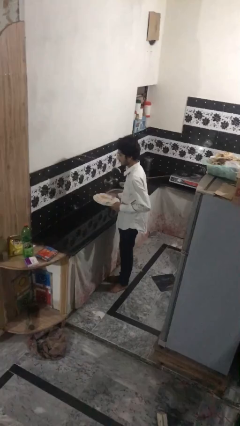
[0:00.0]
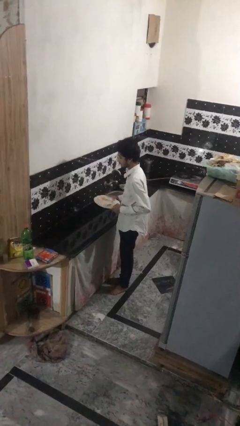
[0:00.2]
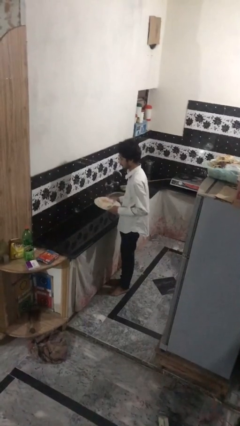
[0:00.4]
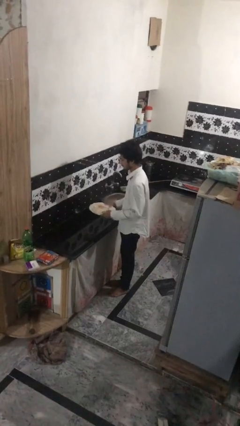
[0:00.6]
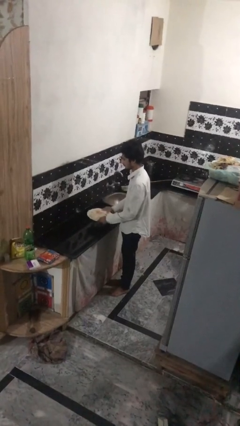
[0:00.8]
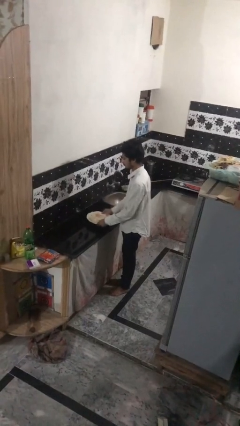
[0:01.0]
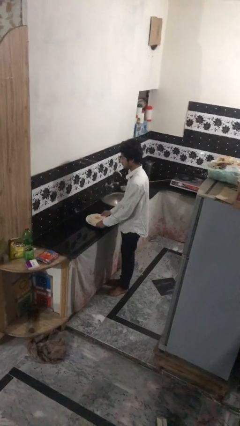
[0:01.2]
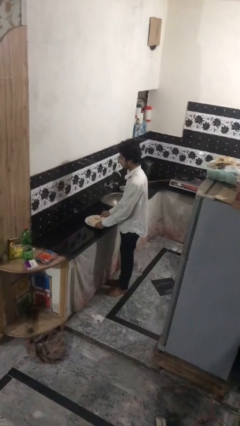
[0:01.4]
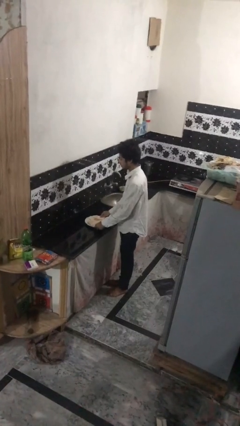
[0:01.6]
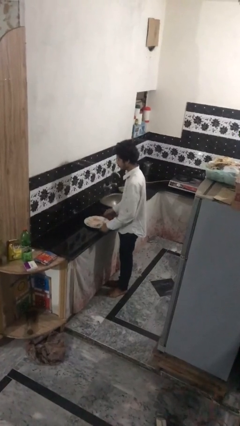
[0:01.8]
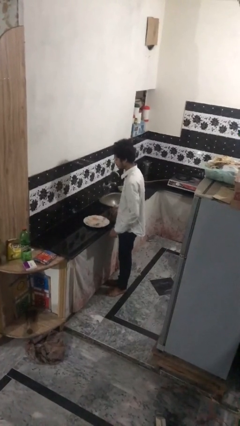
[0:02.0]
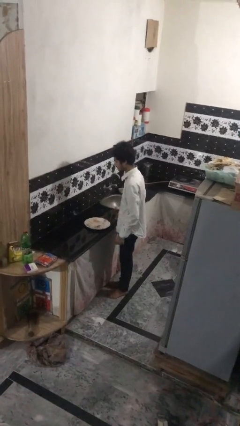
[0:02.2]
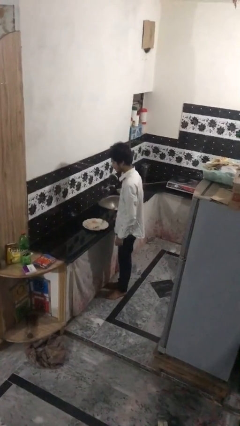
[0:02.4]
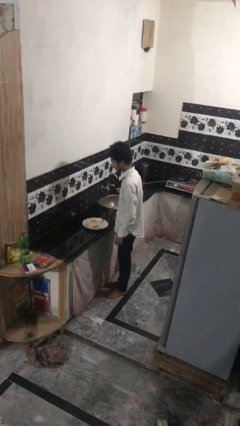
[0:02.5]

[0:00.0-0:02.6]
person puts down object on countertop

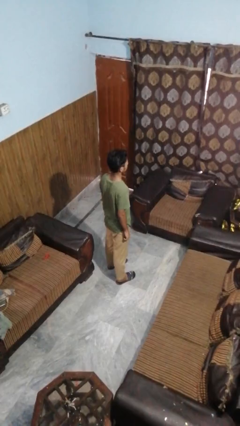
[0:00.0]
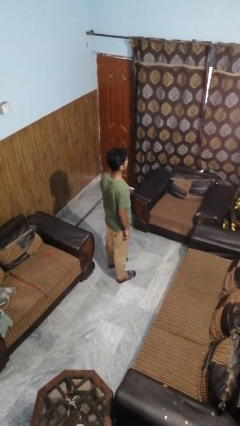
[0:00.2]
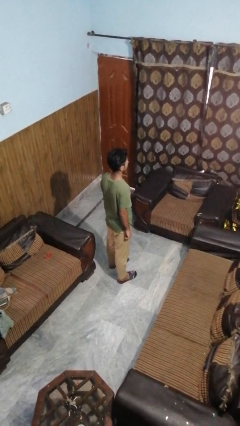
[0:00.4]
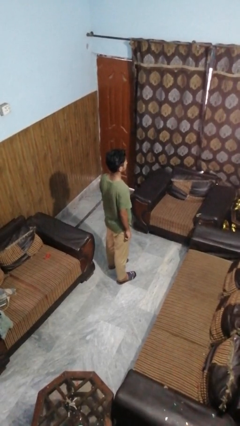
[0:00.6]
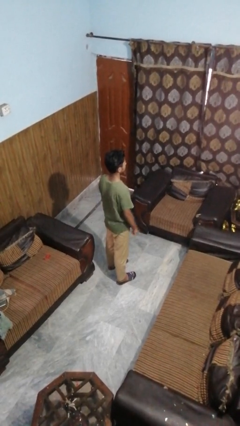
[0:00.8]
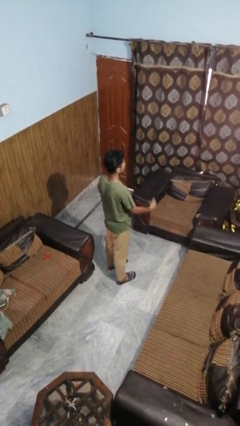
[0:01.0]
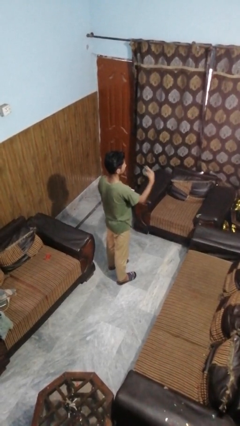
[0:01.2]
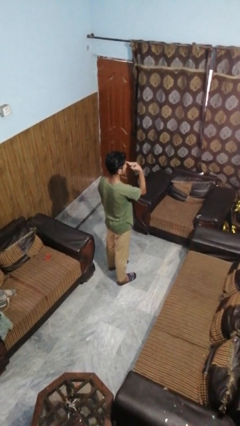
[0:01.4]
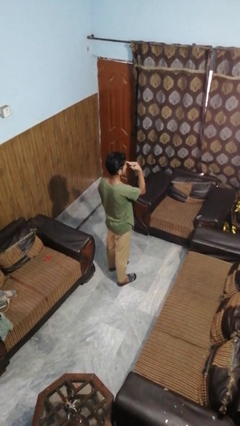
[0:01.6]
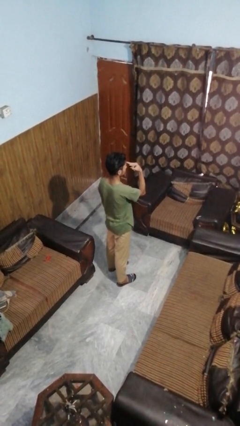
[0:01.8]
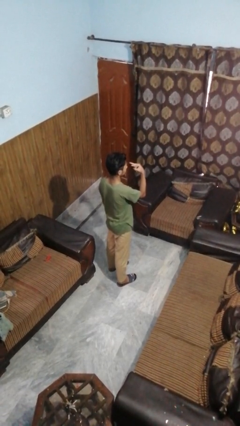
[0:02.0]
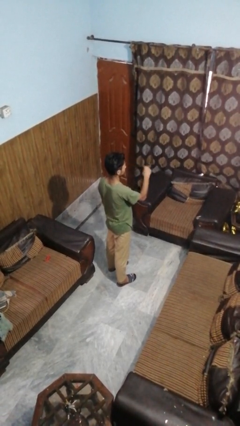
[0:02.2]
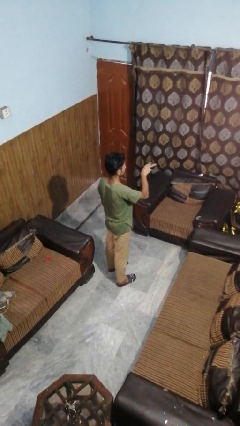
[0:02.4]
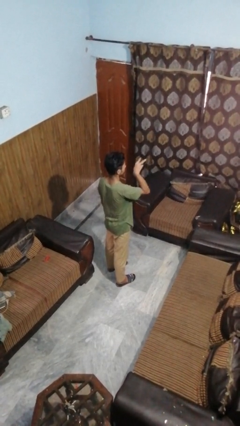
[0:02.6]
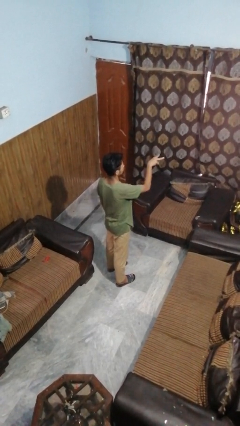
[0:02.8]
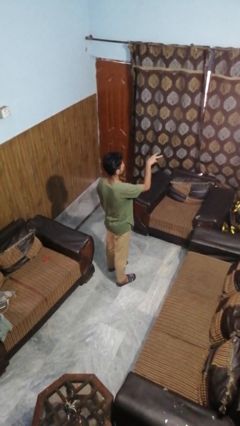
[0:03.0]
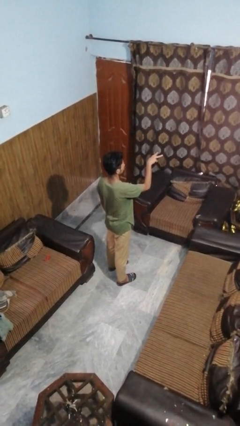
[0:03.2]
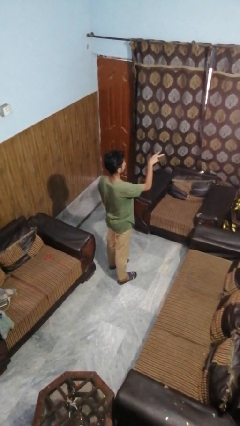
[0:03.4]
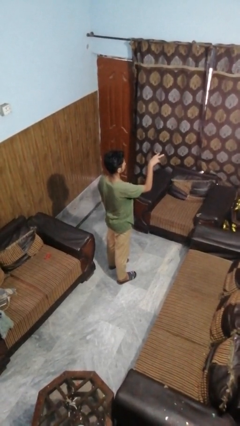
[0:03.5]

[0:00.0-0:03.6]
person gestures watch closely

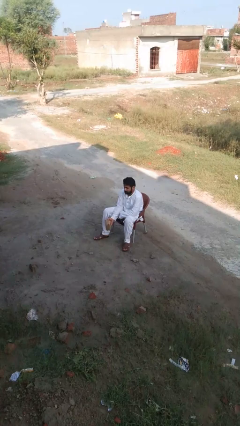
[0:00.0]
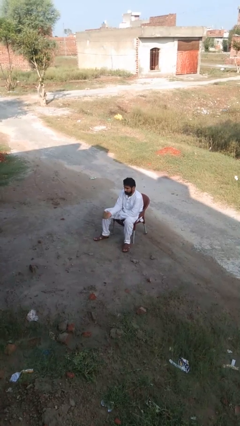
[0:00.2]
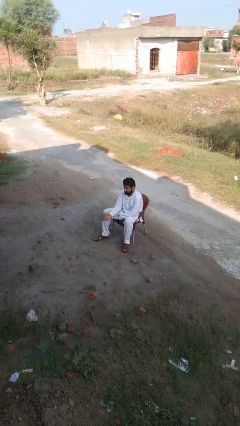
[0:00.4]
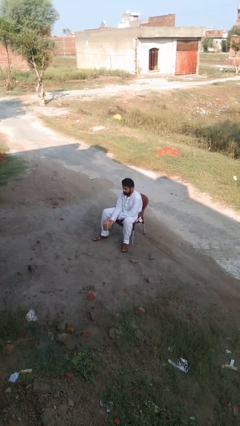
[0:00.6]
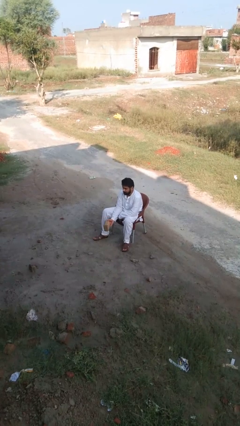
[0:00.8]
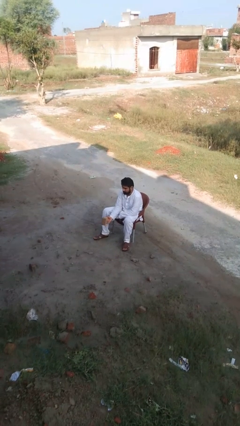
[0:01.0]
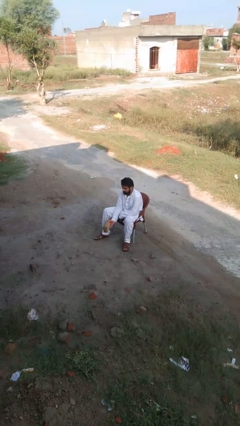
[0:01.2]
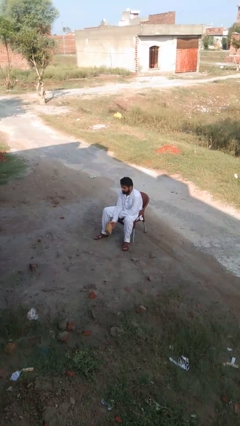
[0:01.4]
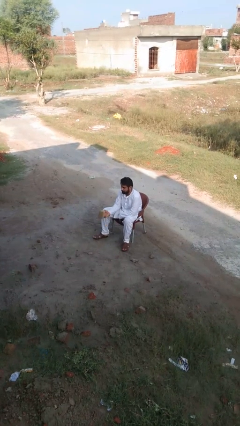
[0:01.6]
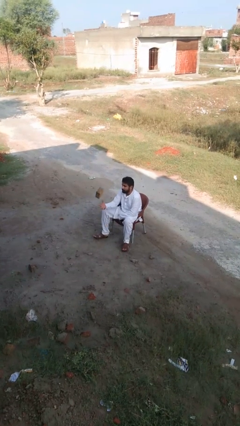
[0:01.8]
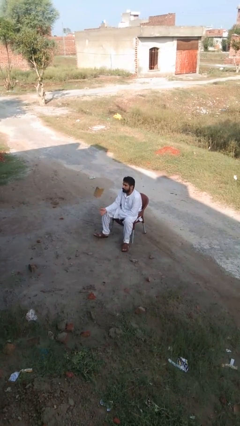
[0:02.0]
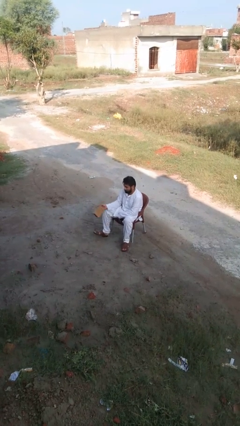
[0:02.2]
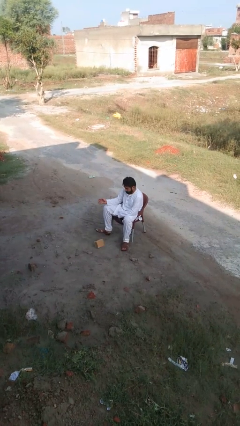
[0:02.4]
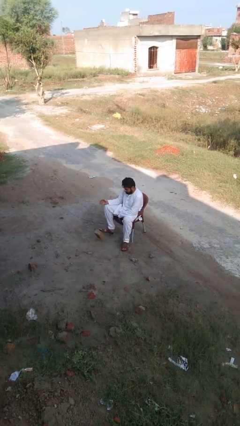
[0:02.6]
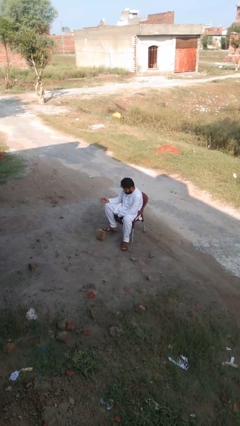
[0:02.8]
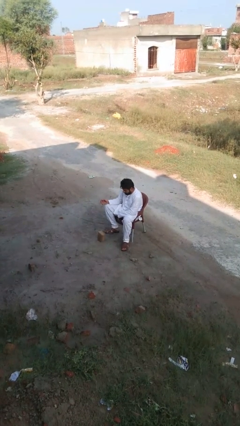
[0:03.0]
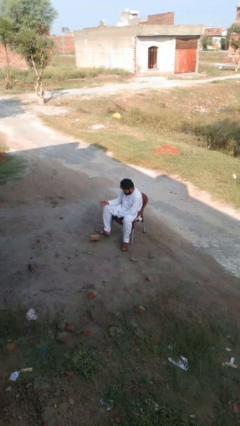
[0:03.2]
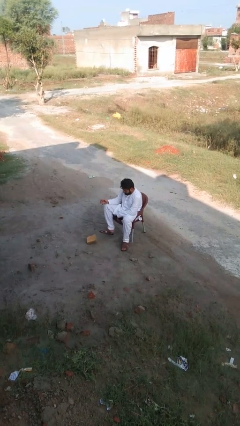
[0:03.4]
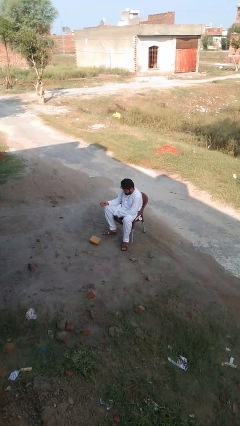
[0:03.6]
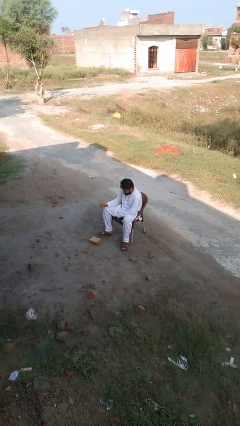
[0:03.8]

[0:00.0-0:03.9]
person throws object into air

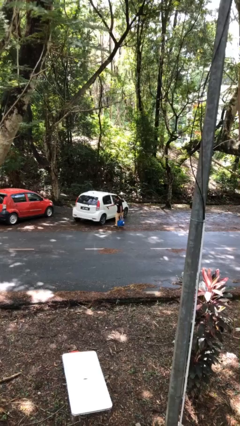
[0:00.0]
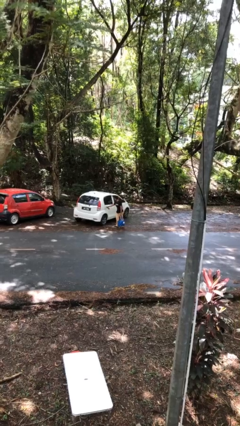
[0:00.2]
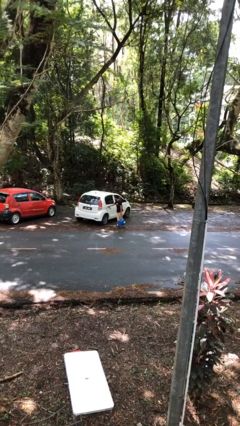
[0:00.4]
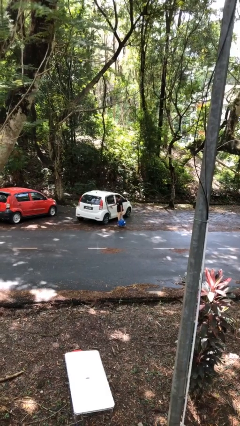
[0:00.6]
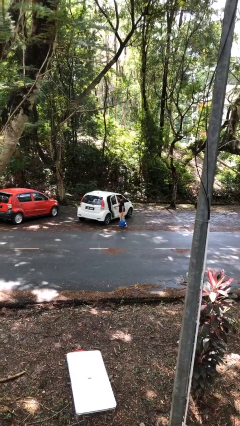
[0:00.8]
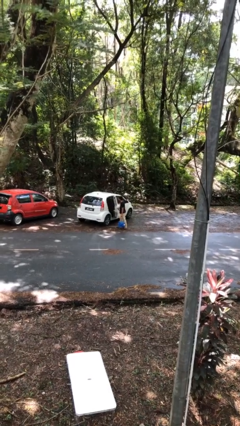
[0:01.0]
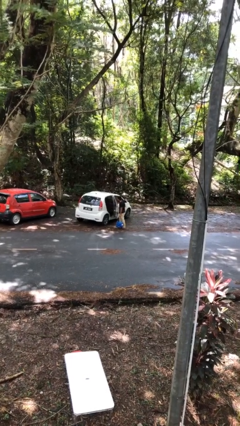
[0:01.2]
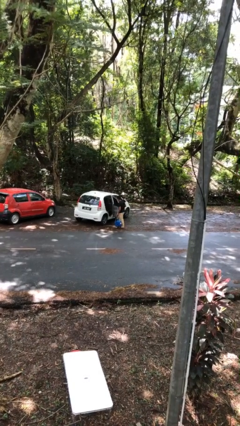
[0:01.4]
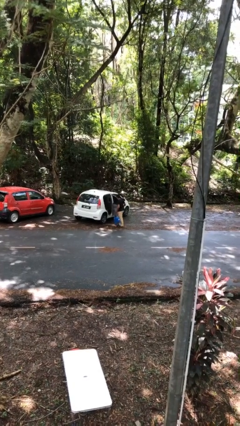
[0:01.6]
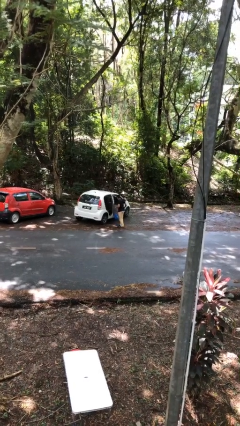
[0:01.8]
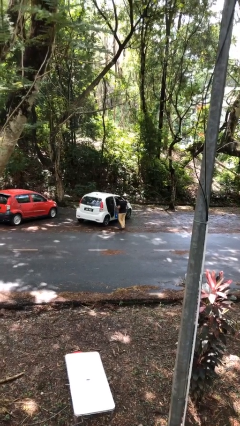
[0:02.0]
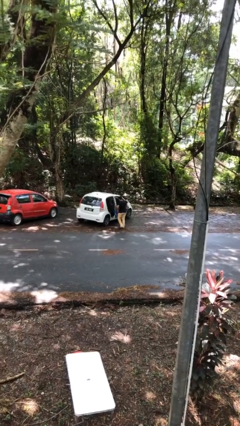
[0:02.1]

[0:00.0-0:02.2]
person opens car door

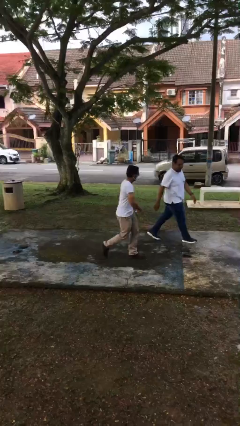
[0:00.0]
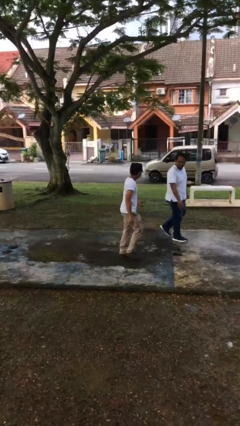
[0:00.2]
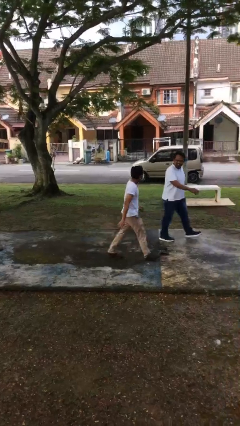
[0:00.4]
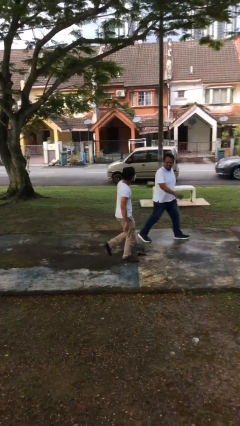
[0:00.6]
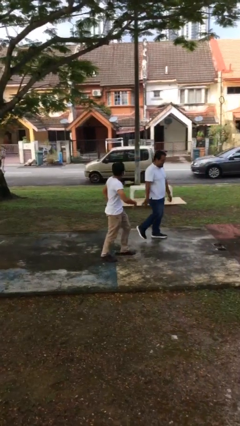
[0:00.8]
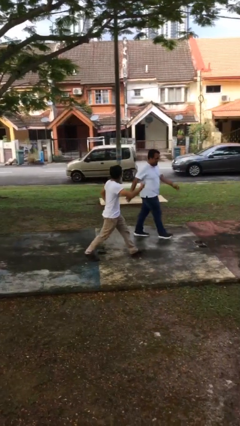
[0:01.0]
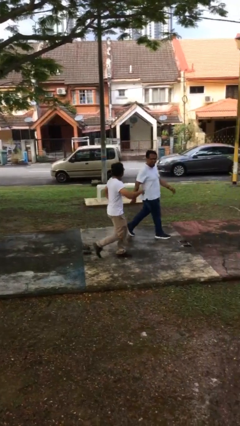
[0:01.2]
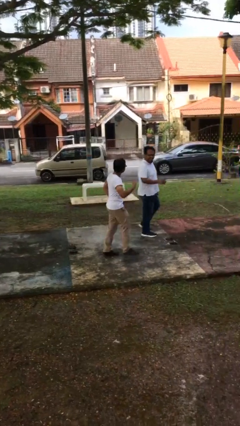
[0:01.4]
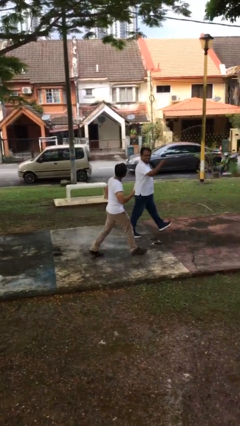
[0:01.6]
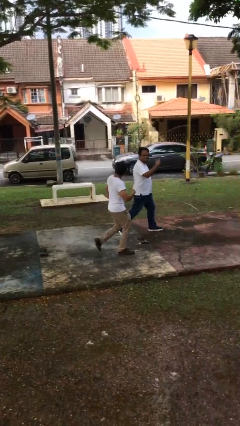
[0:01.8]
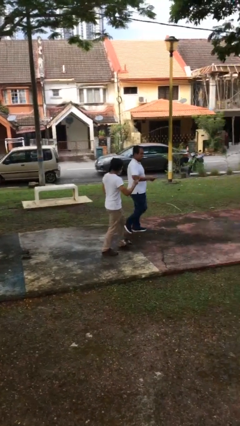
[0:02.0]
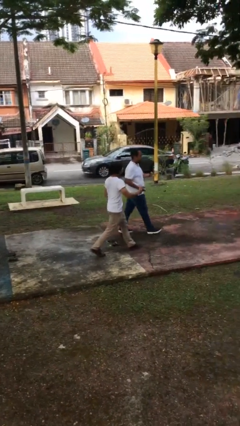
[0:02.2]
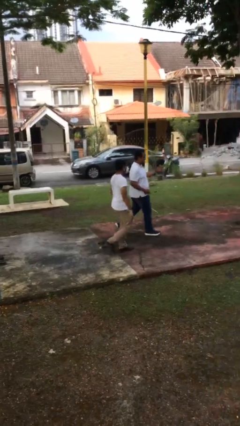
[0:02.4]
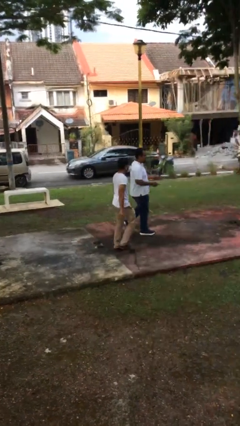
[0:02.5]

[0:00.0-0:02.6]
person talks to person

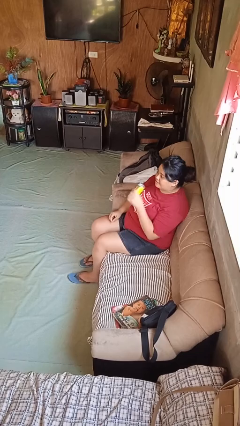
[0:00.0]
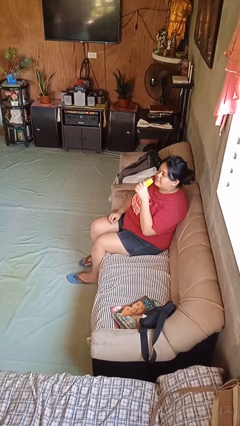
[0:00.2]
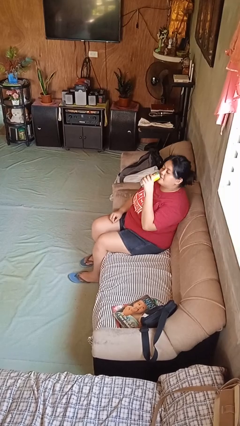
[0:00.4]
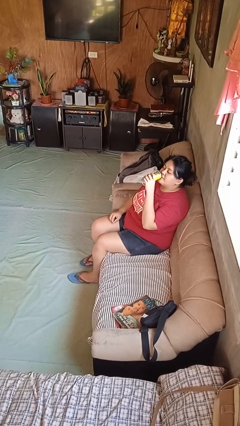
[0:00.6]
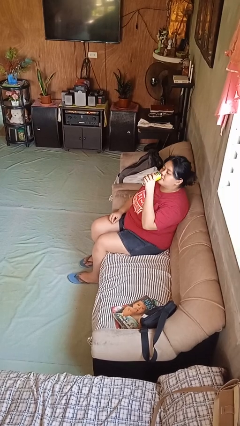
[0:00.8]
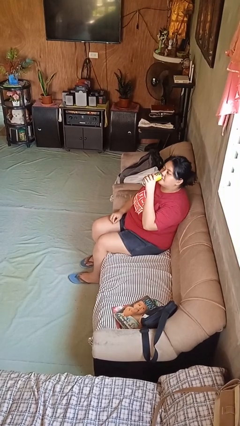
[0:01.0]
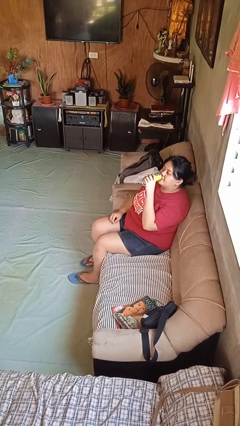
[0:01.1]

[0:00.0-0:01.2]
person drinks from beverage can

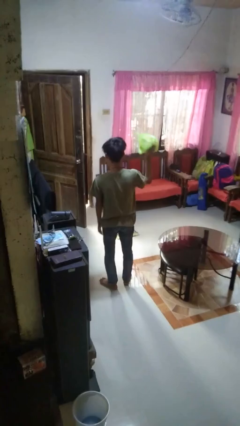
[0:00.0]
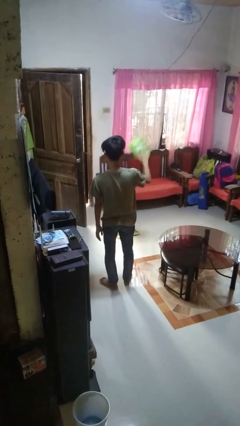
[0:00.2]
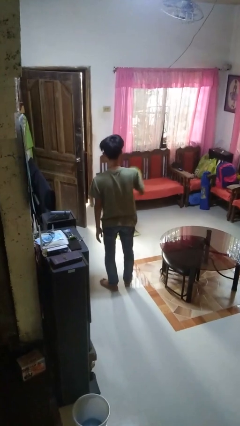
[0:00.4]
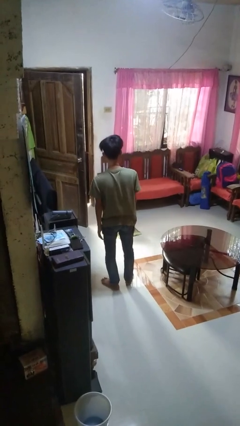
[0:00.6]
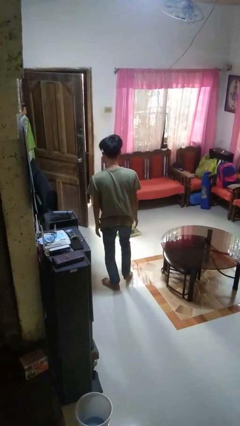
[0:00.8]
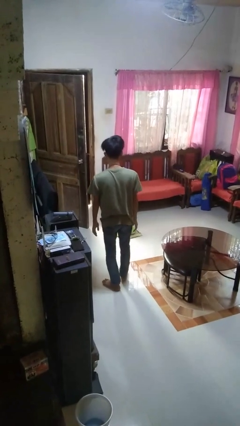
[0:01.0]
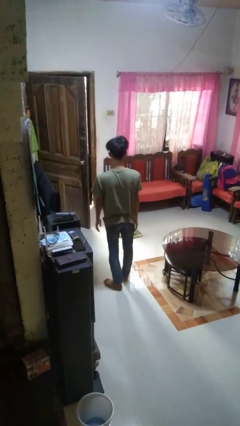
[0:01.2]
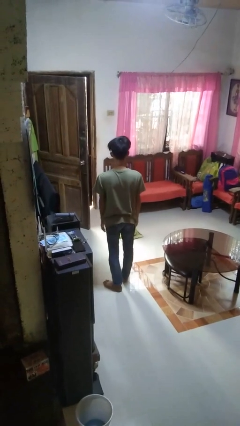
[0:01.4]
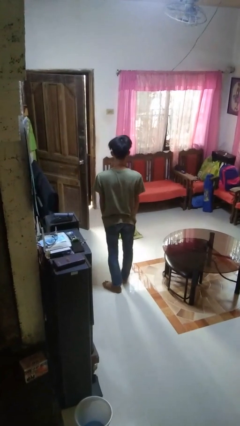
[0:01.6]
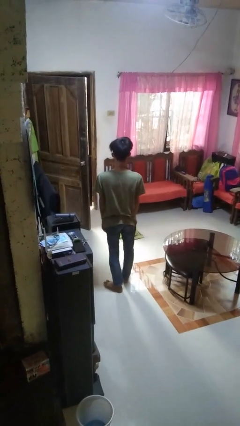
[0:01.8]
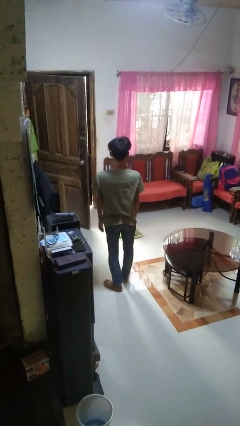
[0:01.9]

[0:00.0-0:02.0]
person throws object to ground
